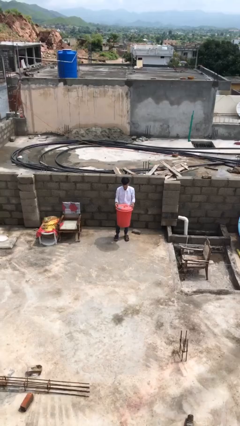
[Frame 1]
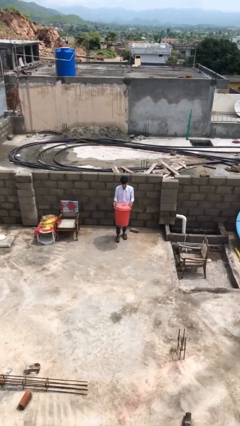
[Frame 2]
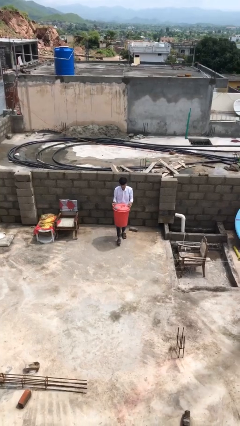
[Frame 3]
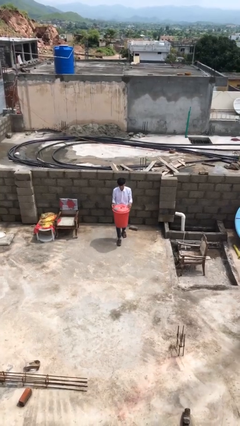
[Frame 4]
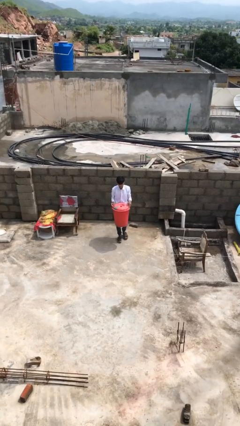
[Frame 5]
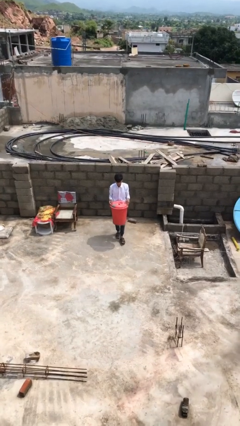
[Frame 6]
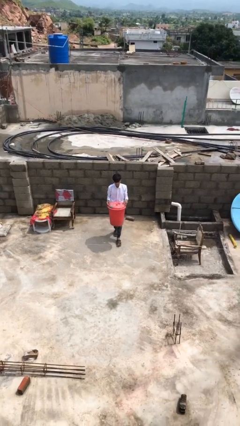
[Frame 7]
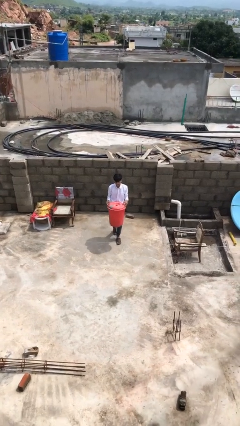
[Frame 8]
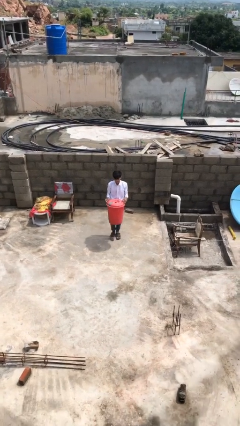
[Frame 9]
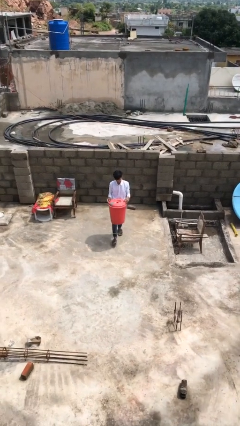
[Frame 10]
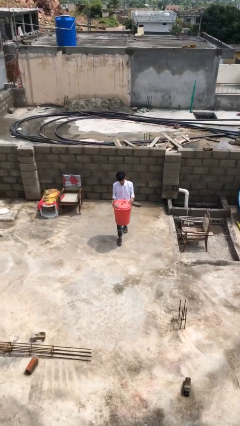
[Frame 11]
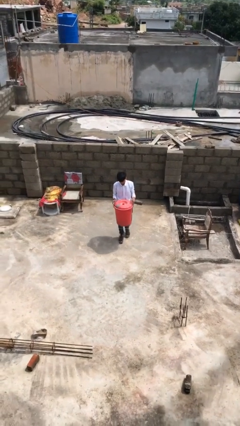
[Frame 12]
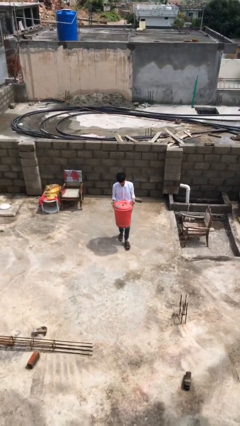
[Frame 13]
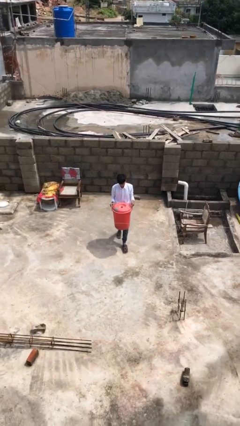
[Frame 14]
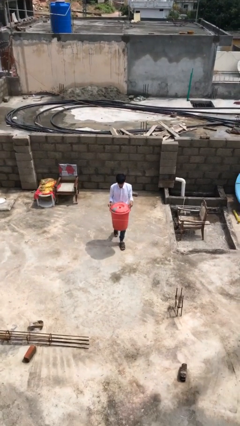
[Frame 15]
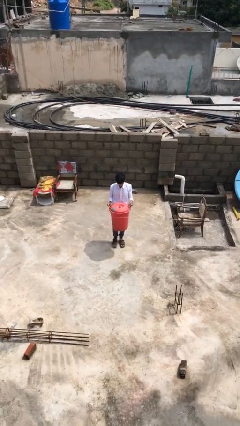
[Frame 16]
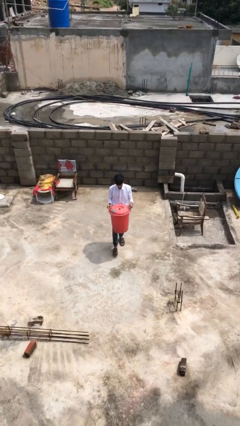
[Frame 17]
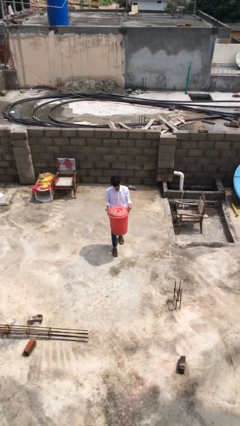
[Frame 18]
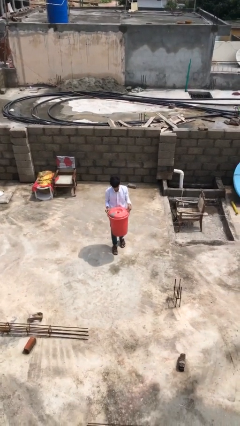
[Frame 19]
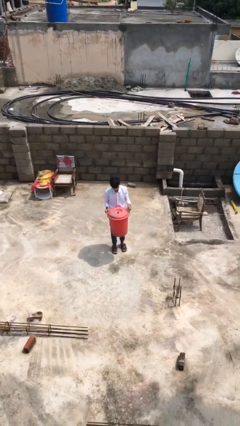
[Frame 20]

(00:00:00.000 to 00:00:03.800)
person carries heavy object

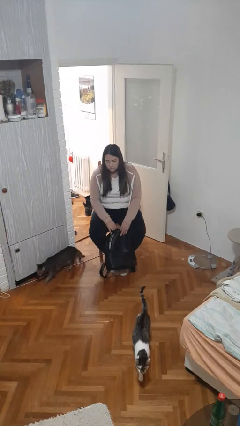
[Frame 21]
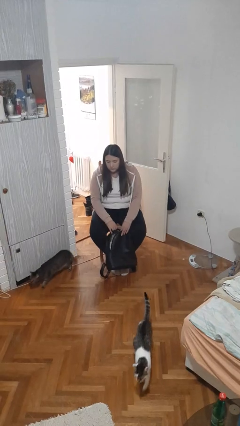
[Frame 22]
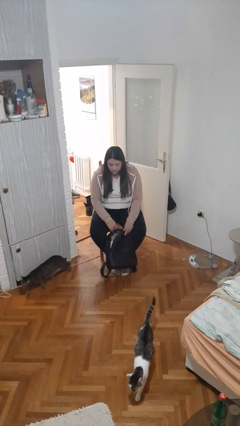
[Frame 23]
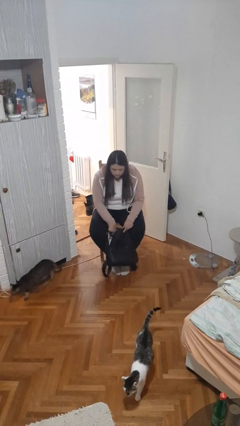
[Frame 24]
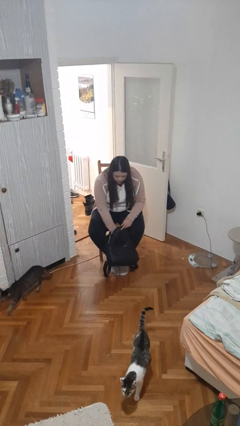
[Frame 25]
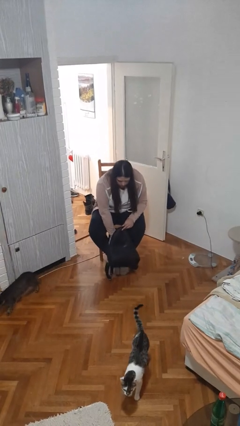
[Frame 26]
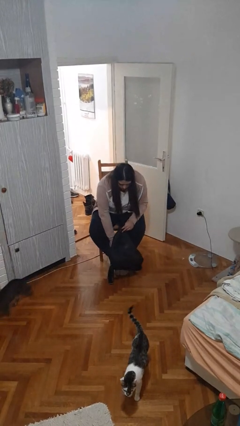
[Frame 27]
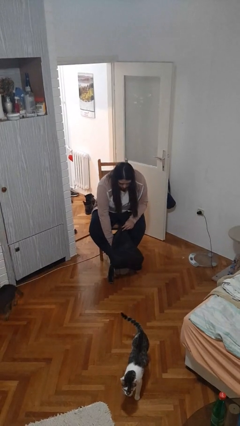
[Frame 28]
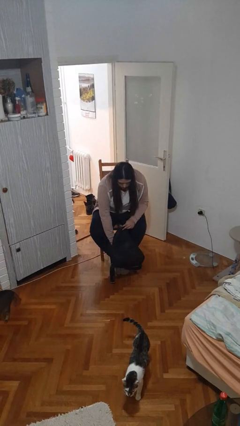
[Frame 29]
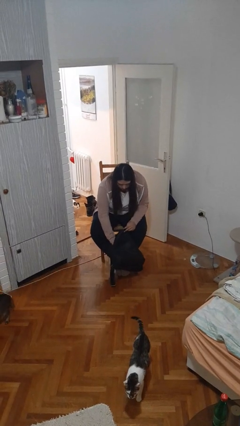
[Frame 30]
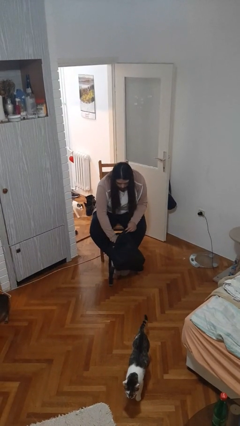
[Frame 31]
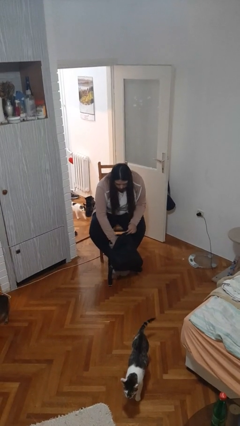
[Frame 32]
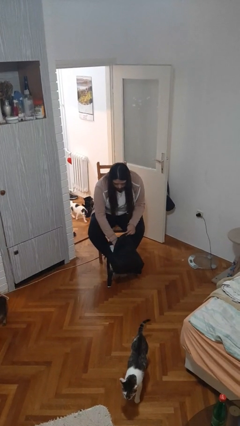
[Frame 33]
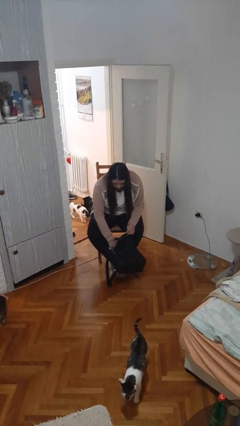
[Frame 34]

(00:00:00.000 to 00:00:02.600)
person searches in backpack

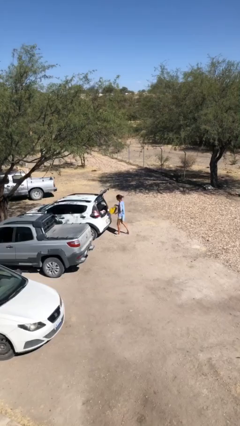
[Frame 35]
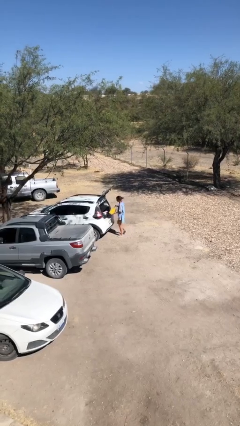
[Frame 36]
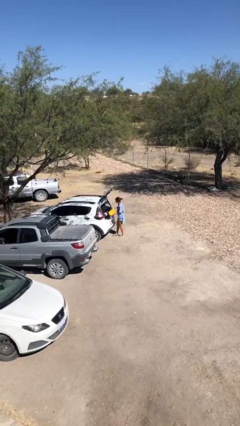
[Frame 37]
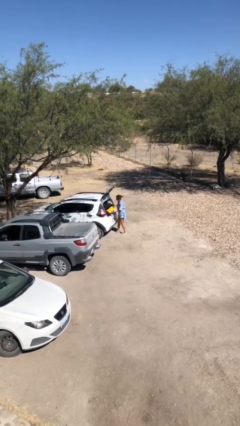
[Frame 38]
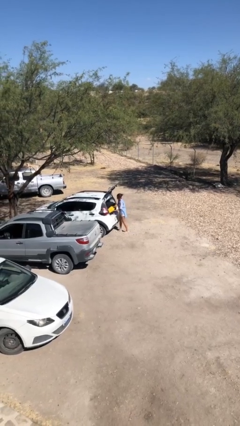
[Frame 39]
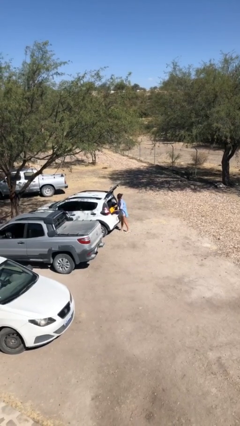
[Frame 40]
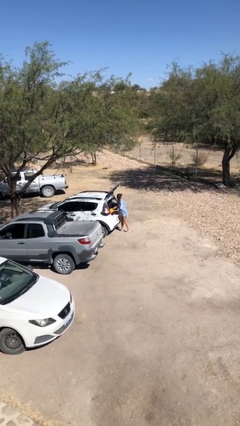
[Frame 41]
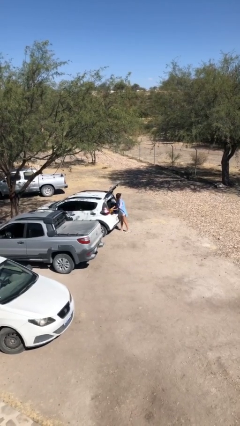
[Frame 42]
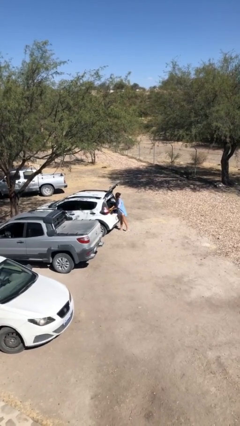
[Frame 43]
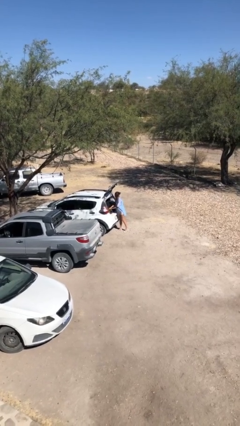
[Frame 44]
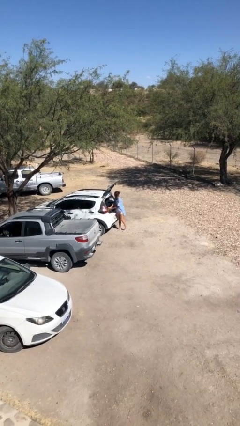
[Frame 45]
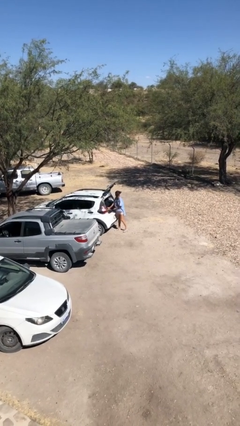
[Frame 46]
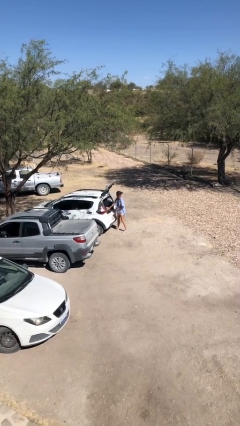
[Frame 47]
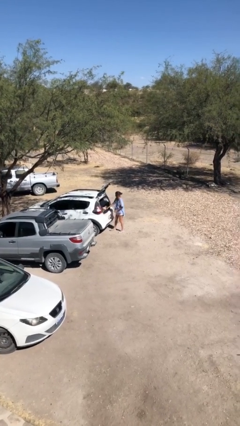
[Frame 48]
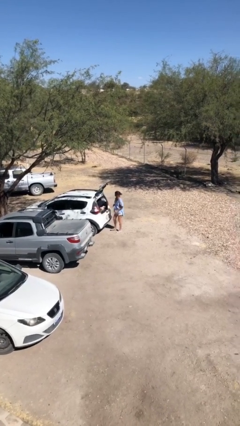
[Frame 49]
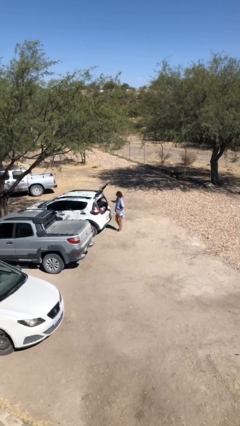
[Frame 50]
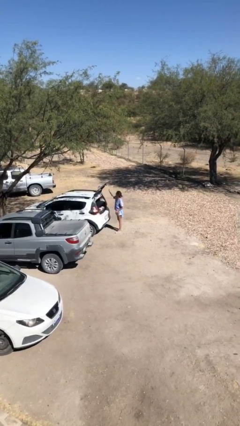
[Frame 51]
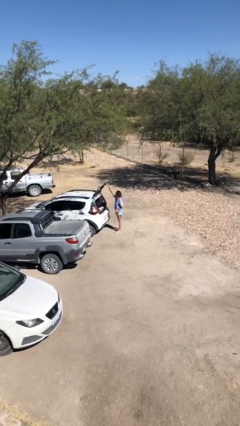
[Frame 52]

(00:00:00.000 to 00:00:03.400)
person loads car

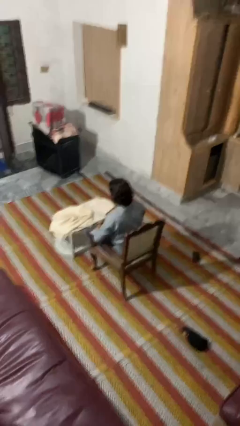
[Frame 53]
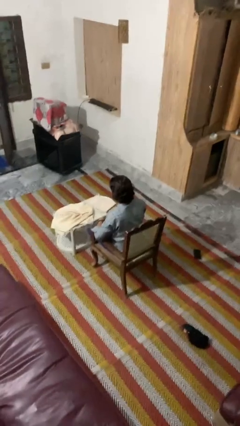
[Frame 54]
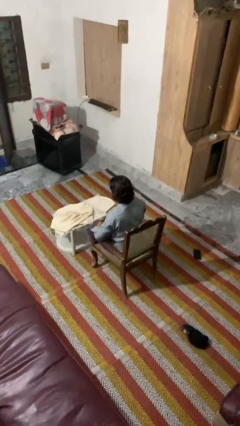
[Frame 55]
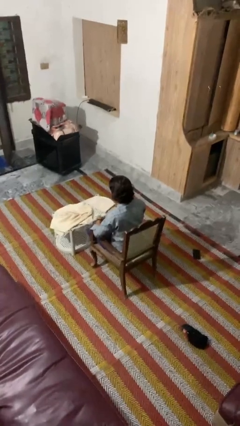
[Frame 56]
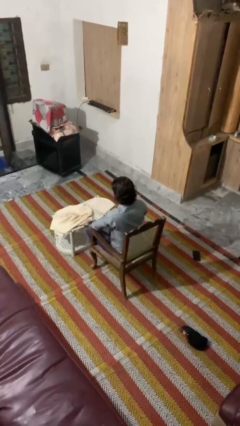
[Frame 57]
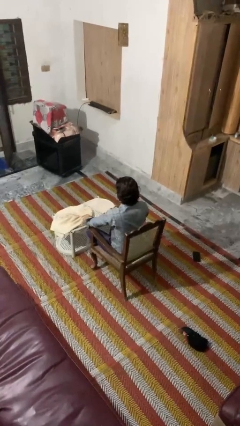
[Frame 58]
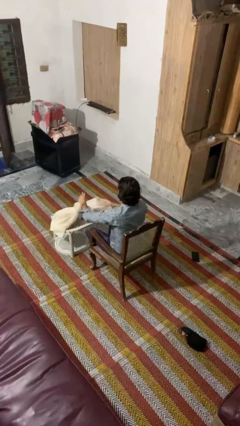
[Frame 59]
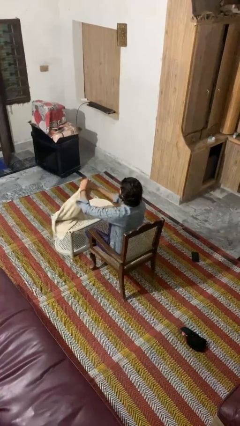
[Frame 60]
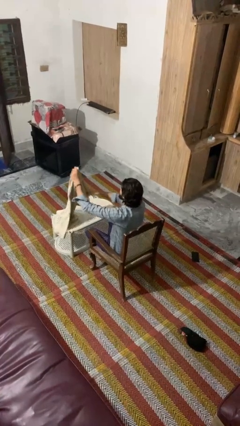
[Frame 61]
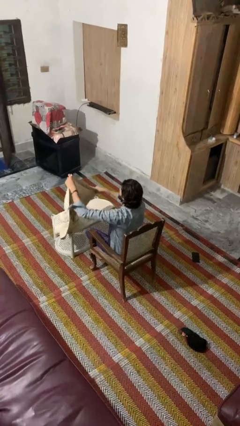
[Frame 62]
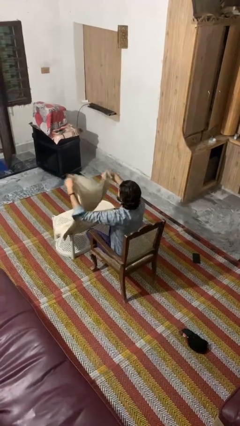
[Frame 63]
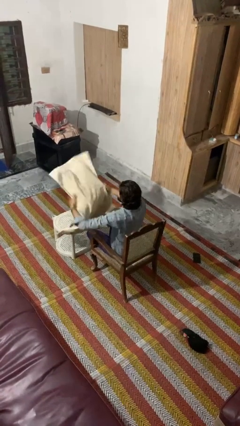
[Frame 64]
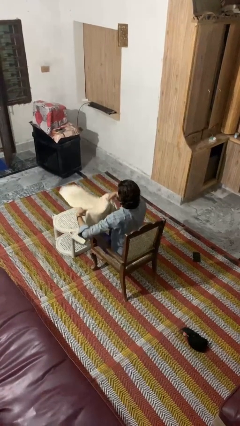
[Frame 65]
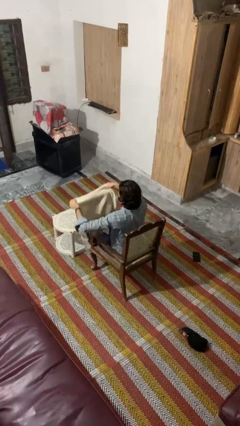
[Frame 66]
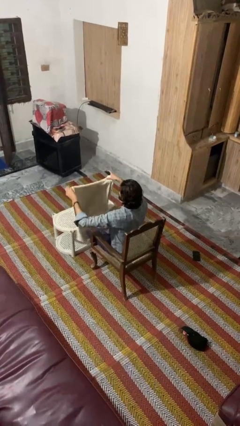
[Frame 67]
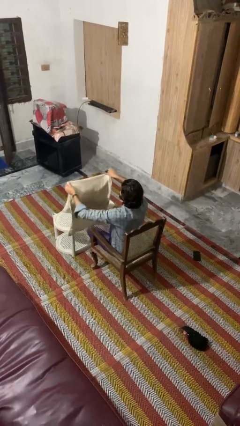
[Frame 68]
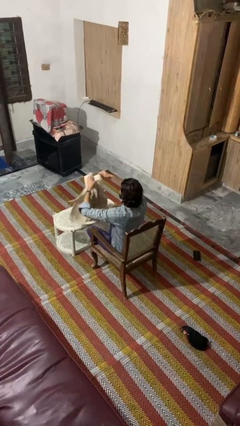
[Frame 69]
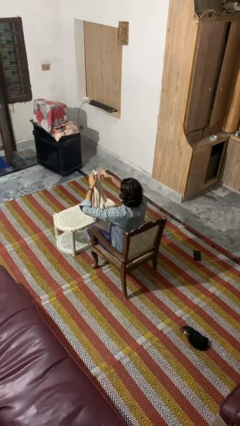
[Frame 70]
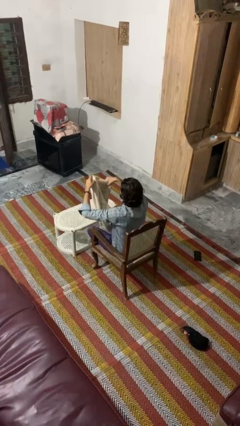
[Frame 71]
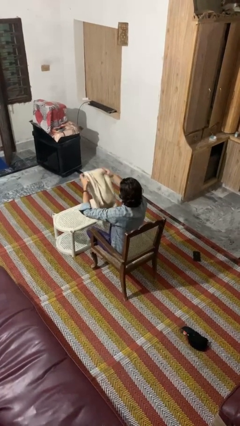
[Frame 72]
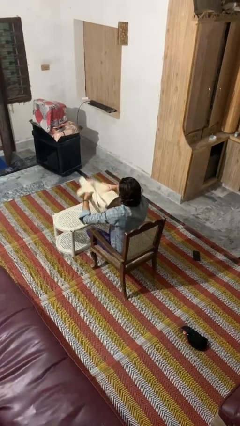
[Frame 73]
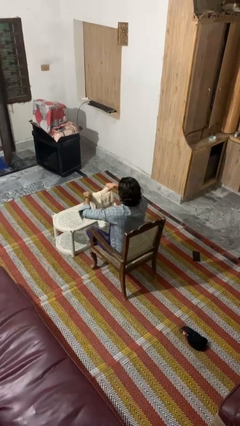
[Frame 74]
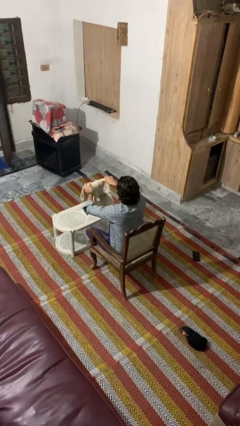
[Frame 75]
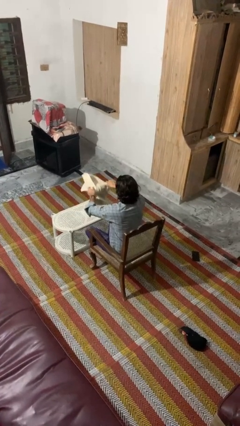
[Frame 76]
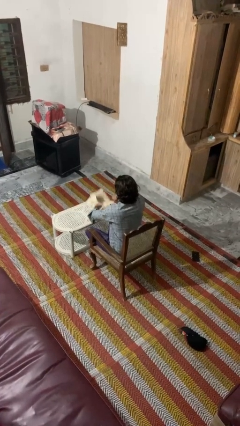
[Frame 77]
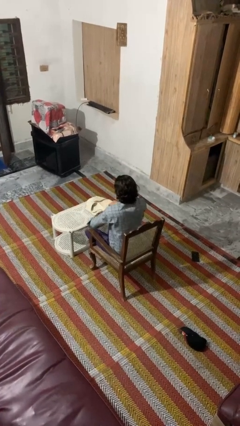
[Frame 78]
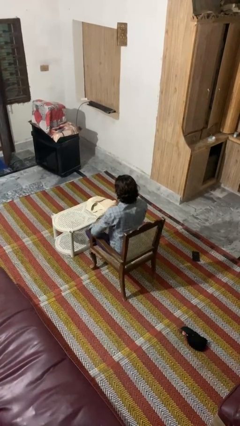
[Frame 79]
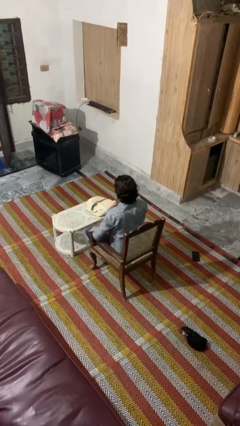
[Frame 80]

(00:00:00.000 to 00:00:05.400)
person folds towel

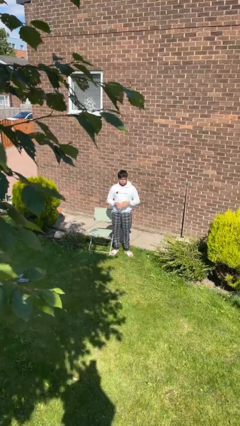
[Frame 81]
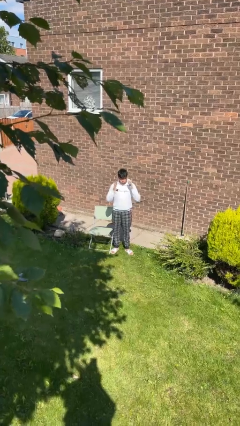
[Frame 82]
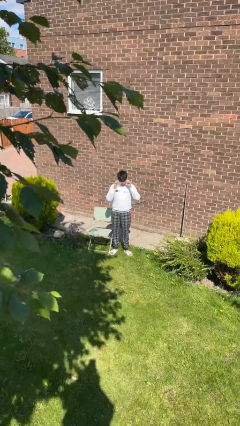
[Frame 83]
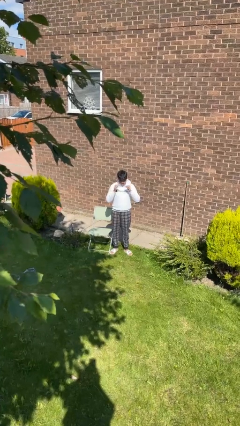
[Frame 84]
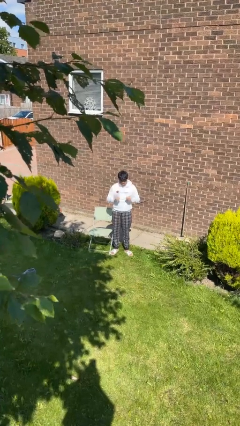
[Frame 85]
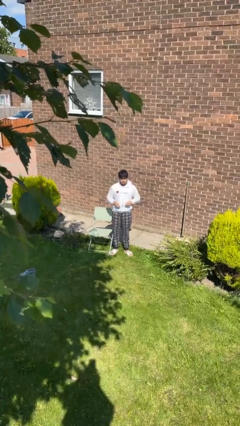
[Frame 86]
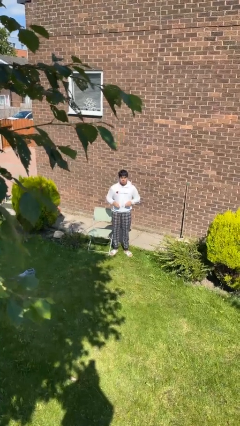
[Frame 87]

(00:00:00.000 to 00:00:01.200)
person takes off glasses

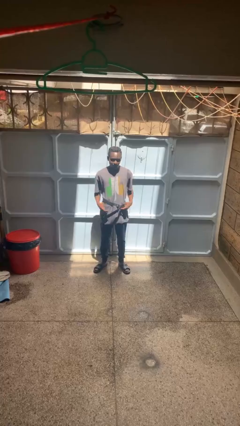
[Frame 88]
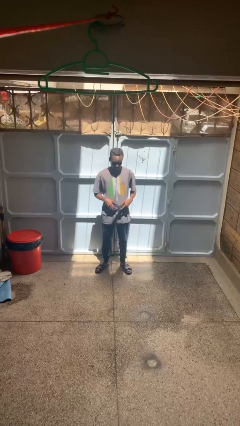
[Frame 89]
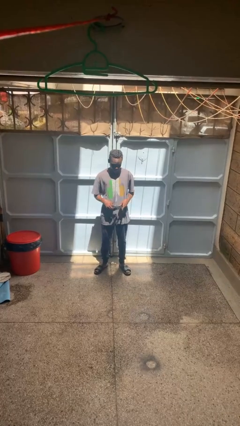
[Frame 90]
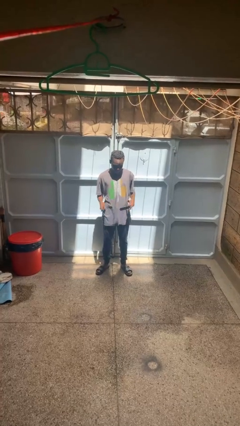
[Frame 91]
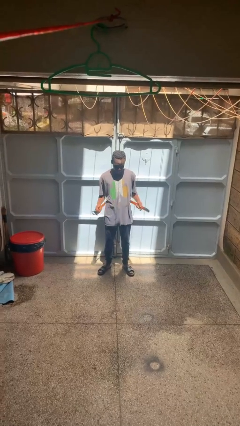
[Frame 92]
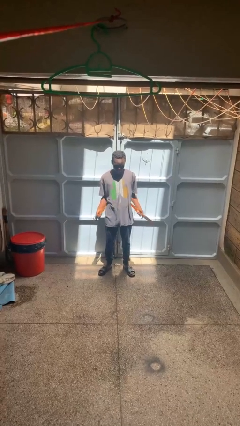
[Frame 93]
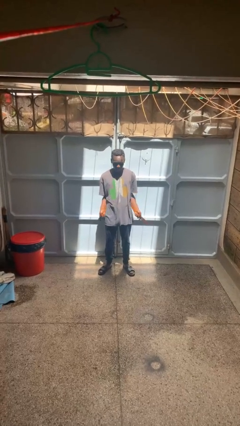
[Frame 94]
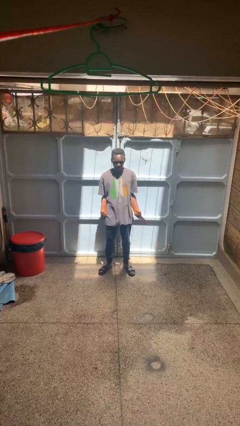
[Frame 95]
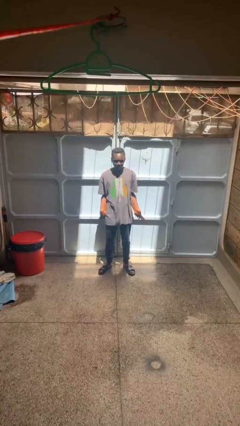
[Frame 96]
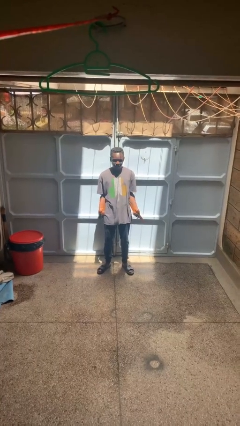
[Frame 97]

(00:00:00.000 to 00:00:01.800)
person takes off belt
